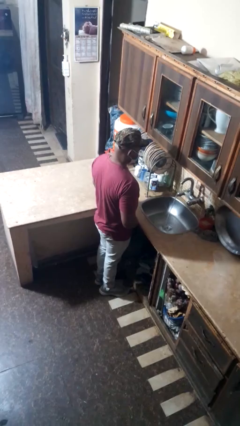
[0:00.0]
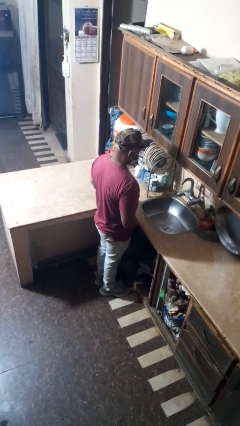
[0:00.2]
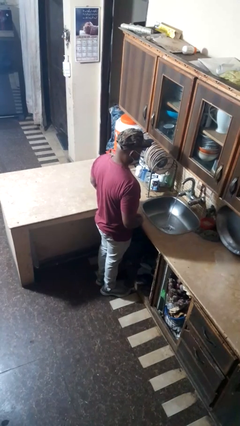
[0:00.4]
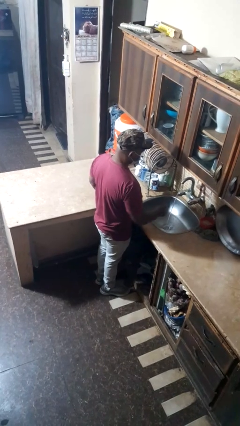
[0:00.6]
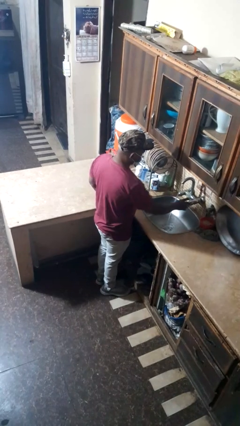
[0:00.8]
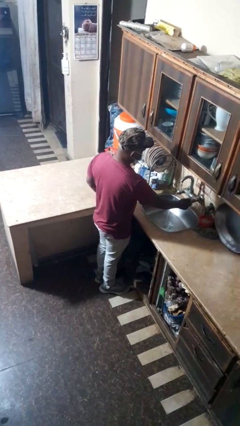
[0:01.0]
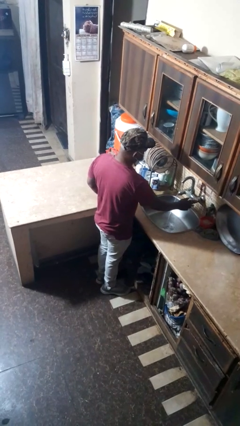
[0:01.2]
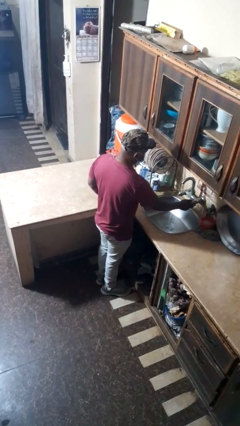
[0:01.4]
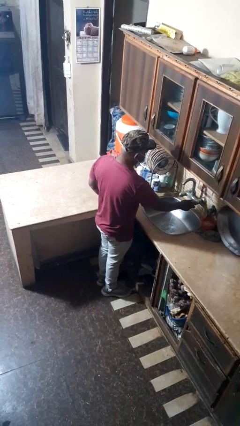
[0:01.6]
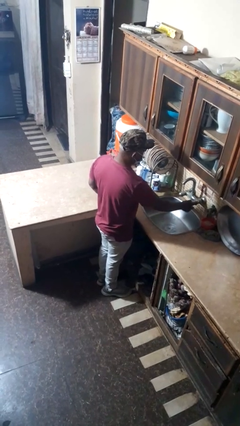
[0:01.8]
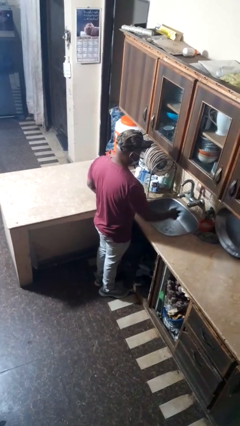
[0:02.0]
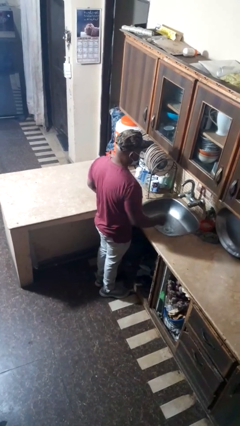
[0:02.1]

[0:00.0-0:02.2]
person turns off faucet

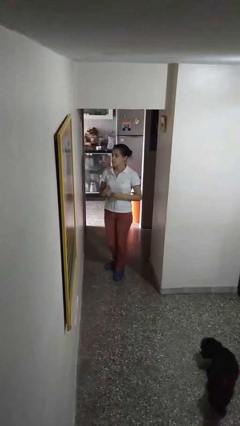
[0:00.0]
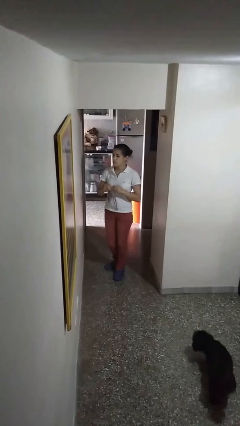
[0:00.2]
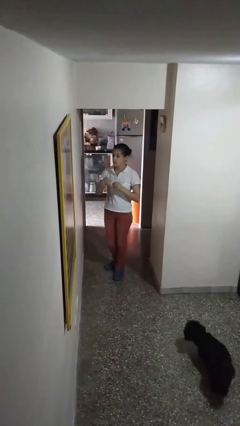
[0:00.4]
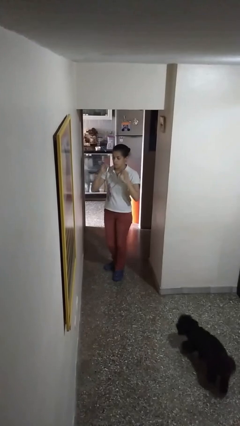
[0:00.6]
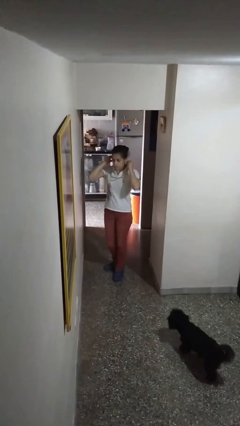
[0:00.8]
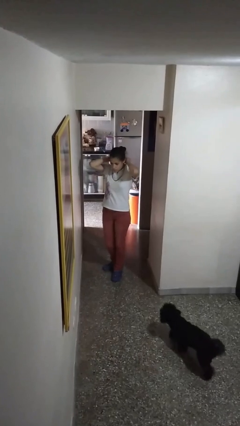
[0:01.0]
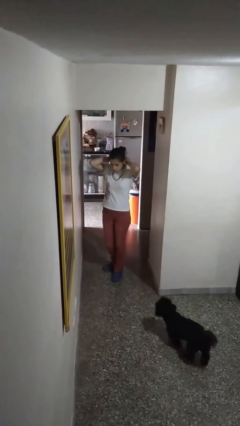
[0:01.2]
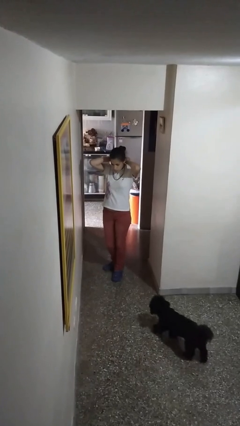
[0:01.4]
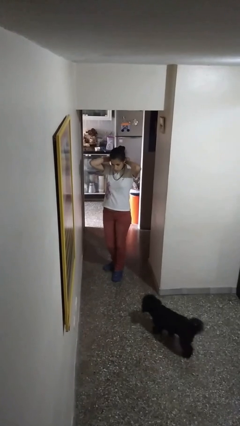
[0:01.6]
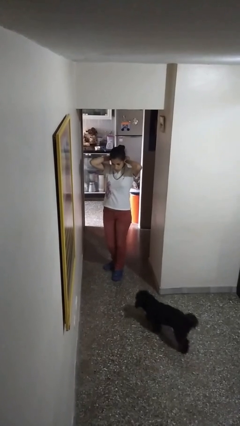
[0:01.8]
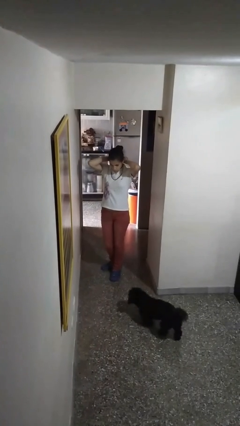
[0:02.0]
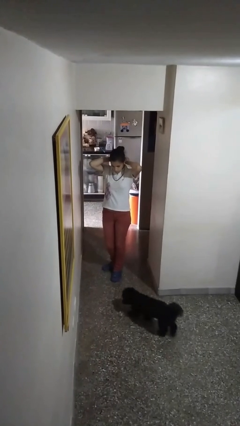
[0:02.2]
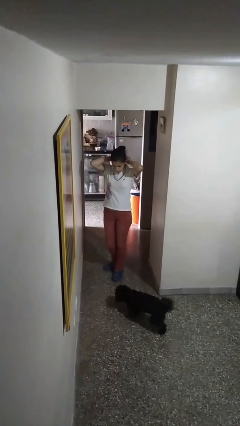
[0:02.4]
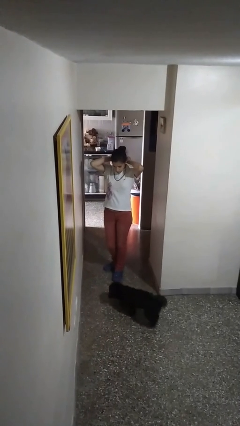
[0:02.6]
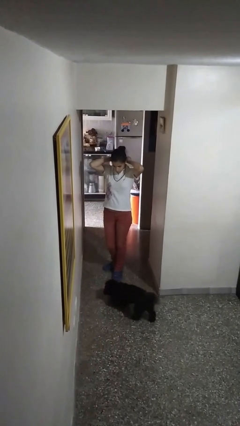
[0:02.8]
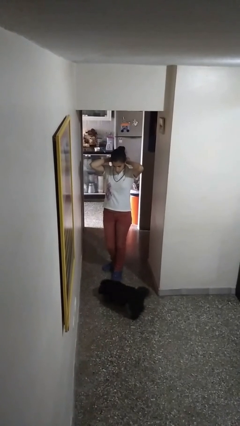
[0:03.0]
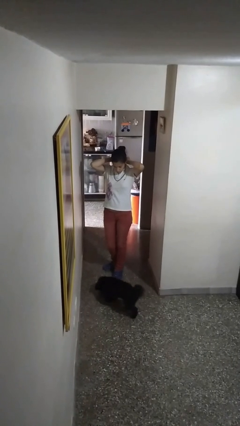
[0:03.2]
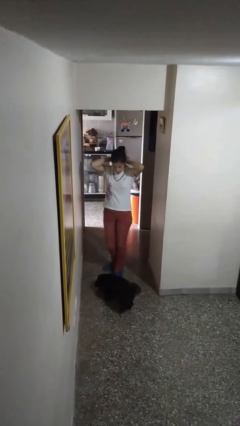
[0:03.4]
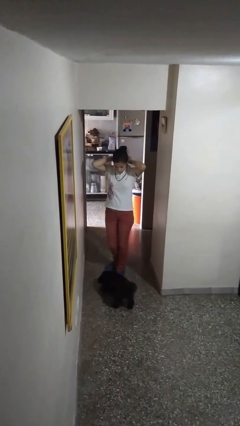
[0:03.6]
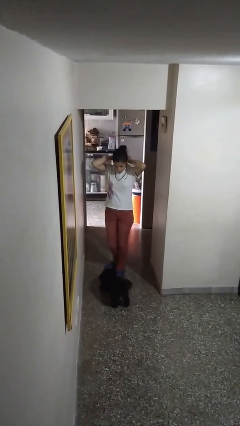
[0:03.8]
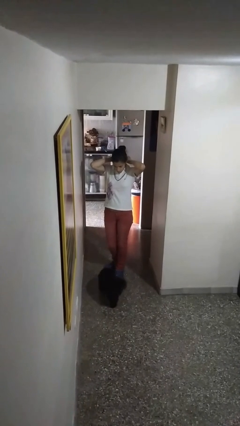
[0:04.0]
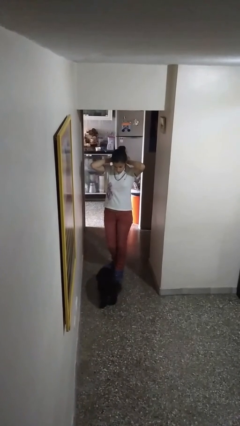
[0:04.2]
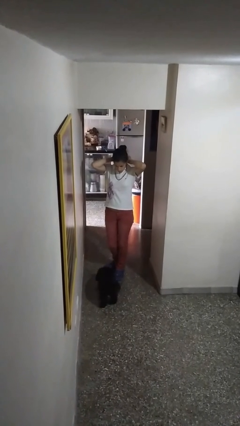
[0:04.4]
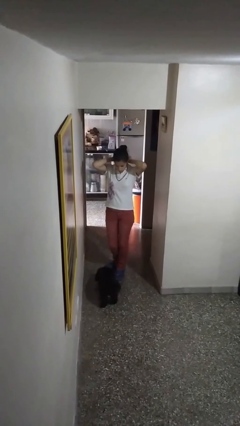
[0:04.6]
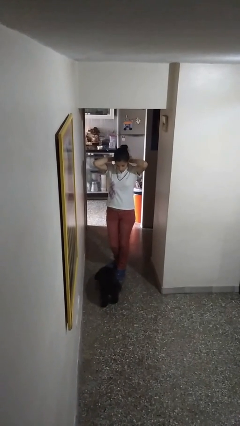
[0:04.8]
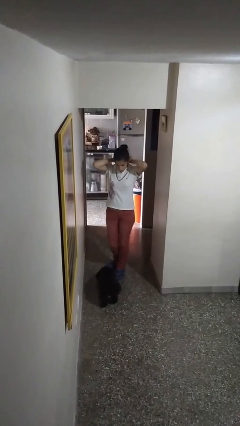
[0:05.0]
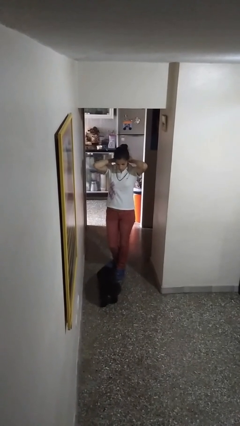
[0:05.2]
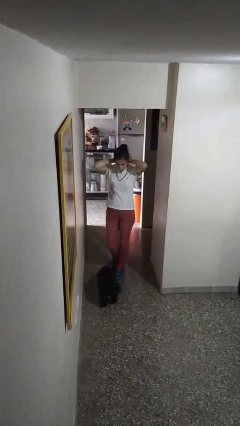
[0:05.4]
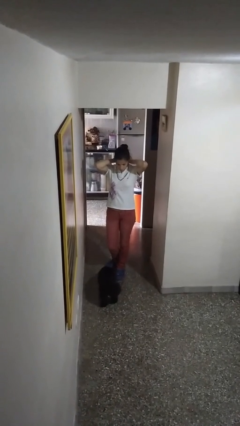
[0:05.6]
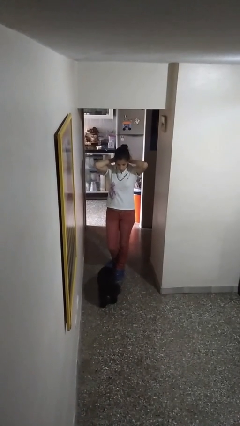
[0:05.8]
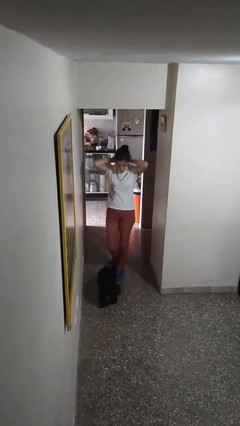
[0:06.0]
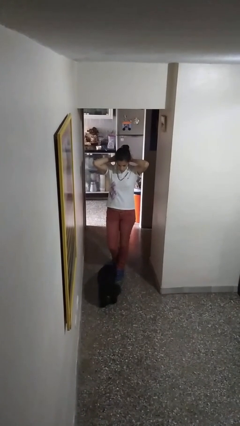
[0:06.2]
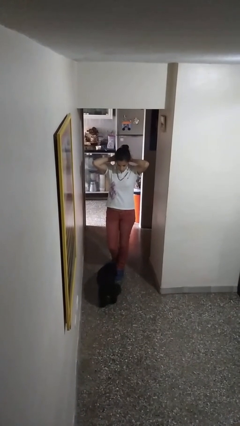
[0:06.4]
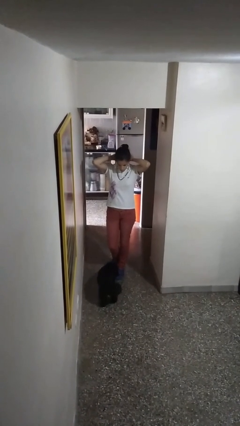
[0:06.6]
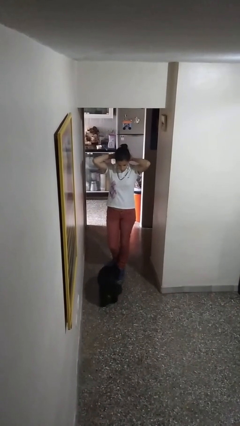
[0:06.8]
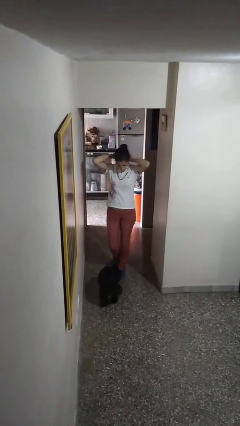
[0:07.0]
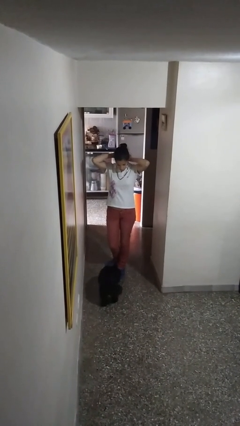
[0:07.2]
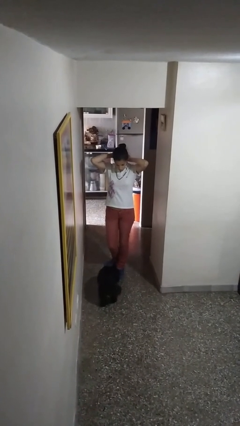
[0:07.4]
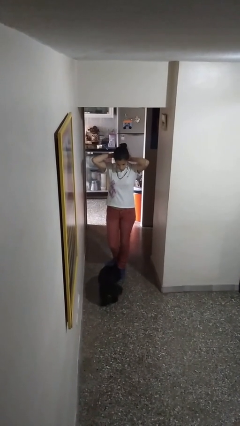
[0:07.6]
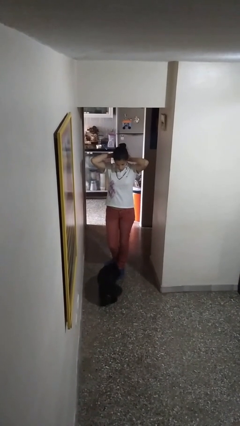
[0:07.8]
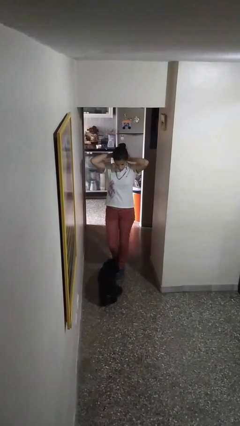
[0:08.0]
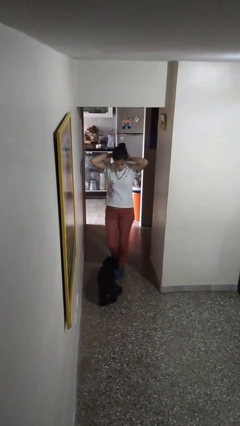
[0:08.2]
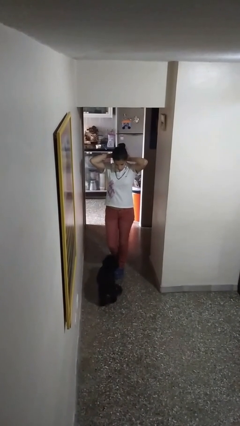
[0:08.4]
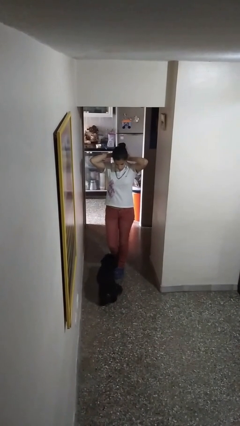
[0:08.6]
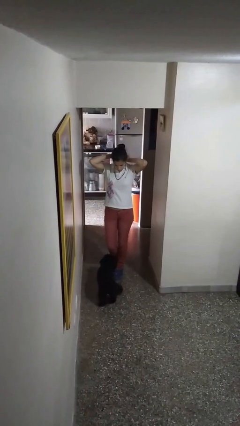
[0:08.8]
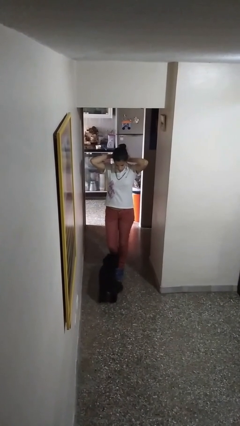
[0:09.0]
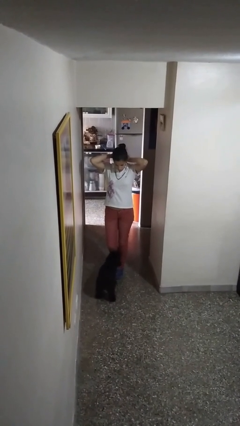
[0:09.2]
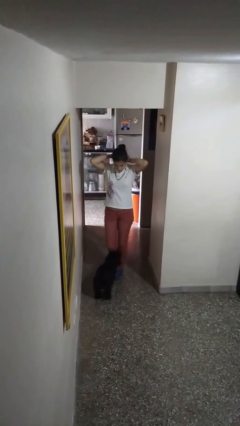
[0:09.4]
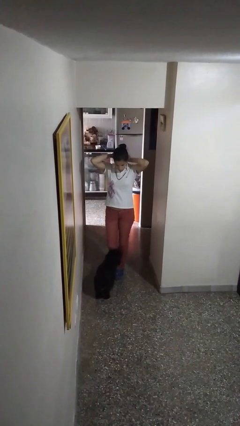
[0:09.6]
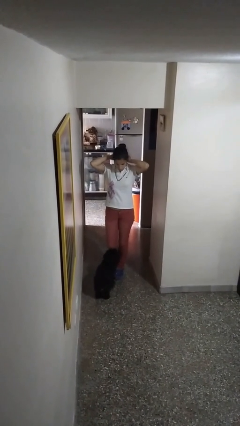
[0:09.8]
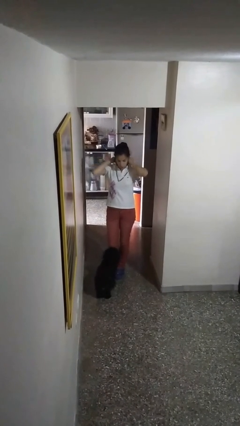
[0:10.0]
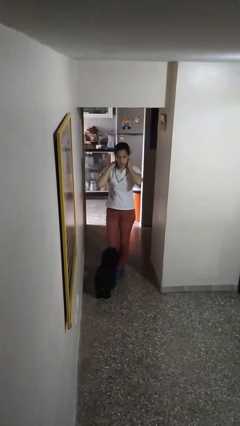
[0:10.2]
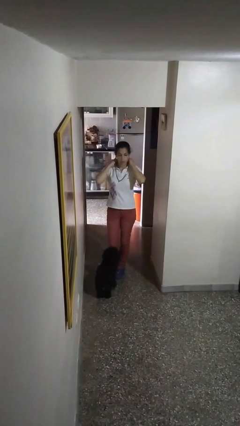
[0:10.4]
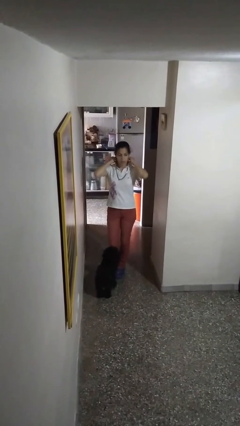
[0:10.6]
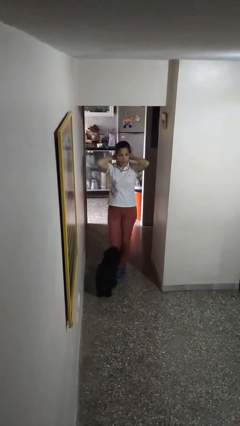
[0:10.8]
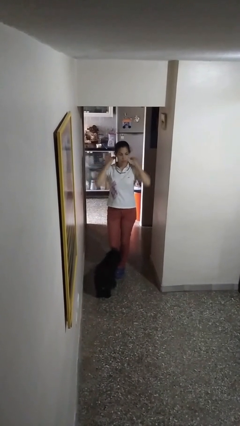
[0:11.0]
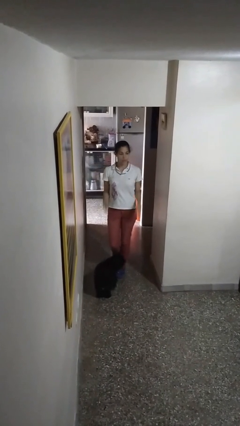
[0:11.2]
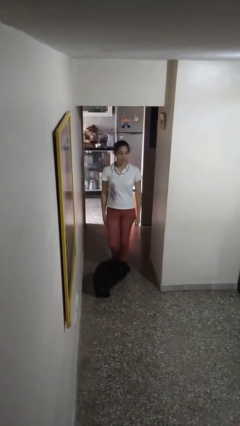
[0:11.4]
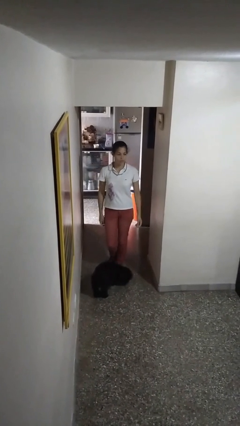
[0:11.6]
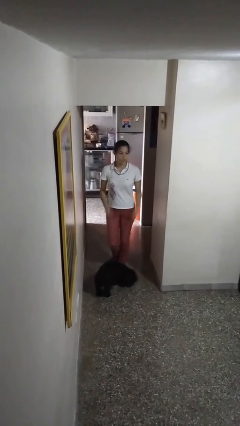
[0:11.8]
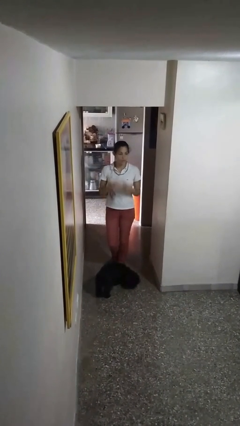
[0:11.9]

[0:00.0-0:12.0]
person puts on necklace

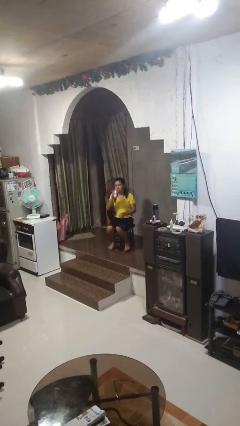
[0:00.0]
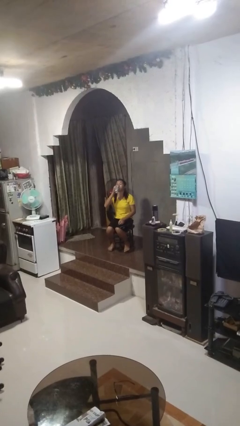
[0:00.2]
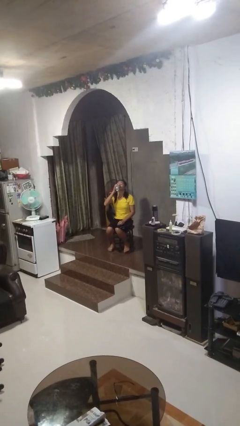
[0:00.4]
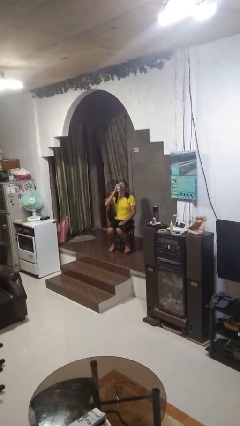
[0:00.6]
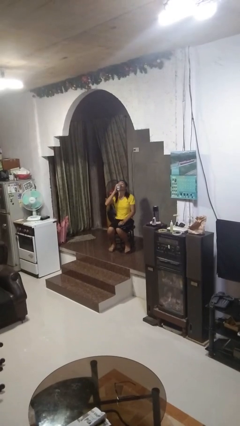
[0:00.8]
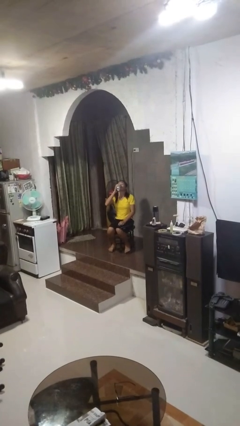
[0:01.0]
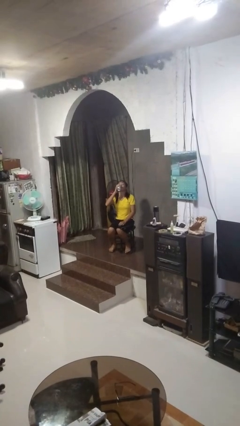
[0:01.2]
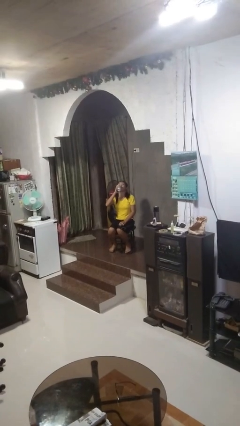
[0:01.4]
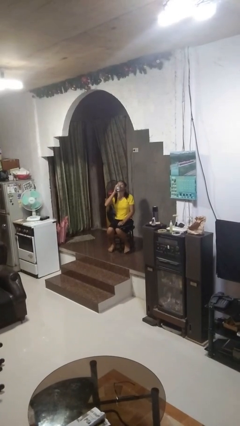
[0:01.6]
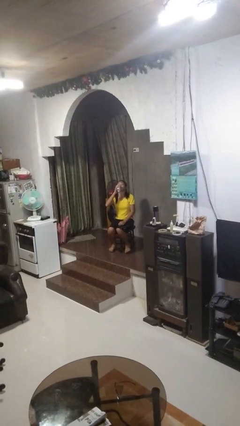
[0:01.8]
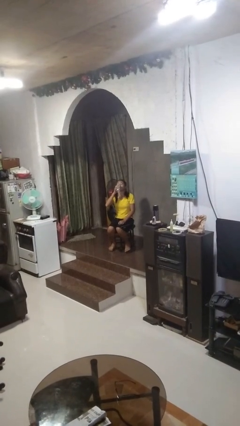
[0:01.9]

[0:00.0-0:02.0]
person drinks from beverage can

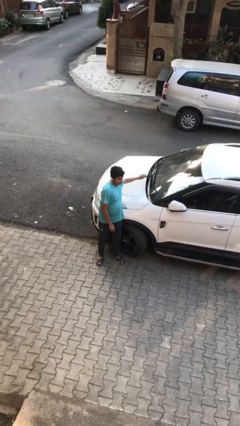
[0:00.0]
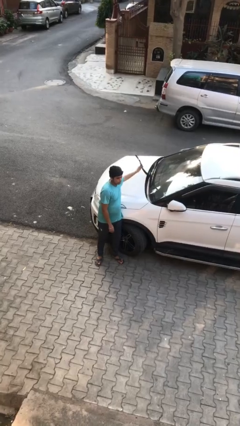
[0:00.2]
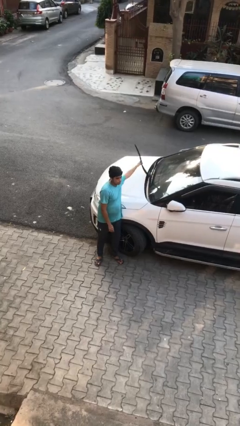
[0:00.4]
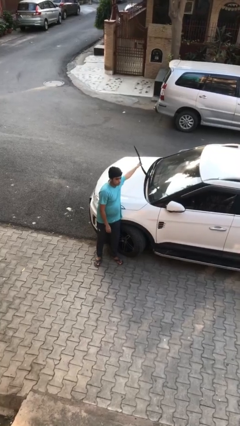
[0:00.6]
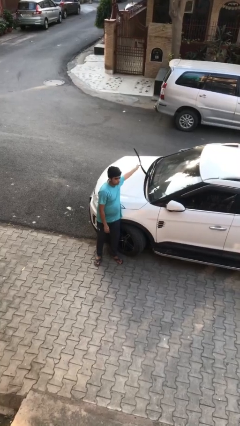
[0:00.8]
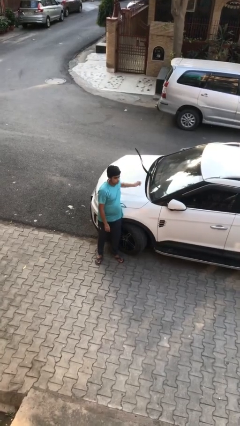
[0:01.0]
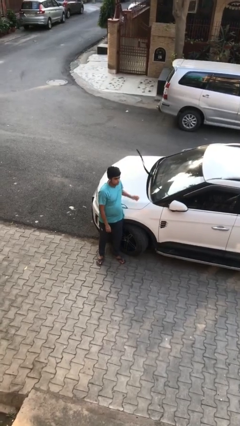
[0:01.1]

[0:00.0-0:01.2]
person flips up car wipers

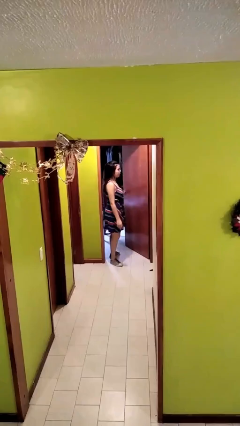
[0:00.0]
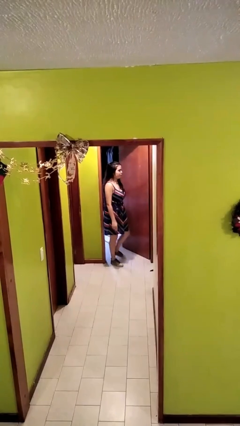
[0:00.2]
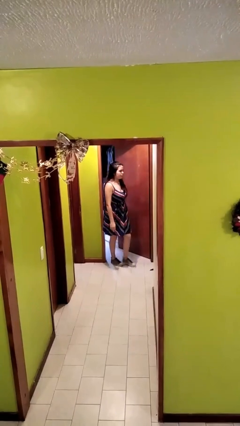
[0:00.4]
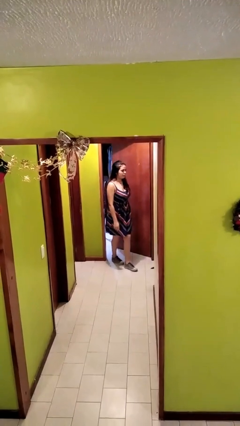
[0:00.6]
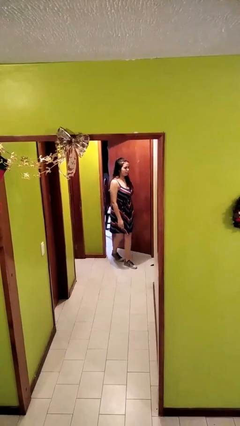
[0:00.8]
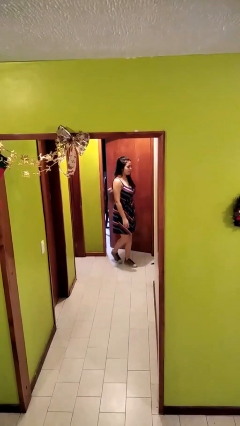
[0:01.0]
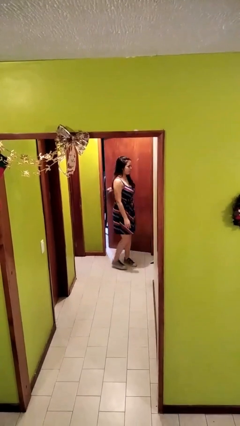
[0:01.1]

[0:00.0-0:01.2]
person closes facility door
